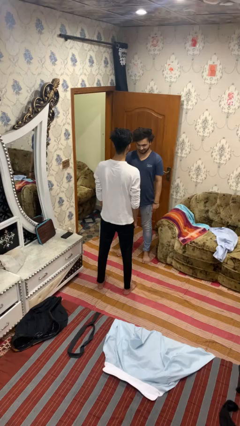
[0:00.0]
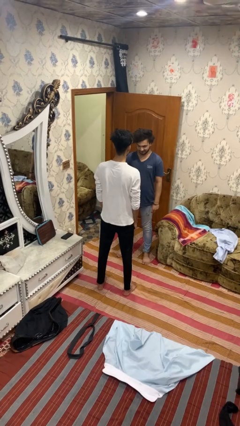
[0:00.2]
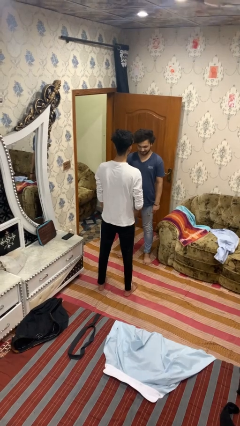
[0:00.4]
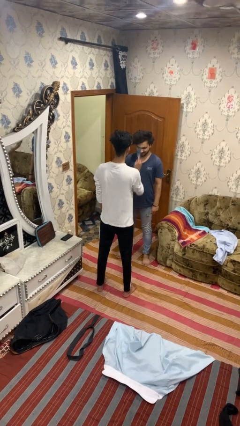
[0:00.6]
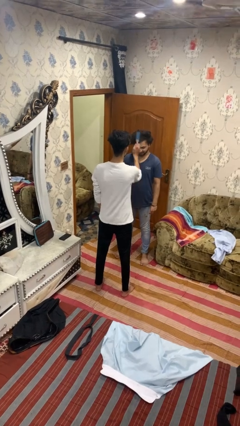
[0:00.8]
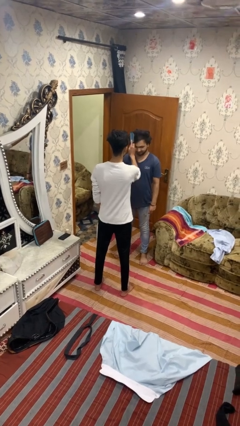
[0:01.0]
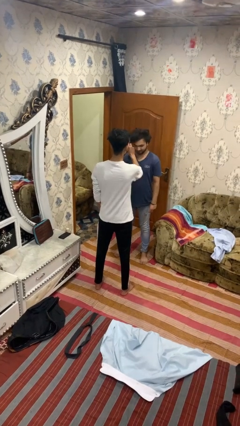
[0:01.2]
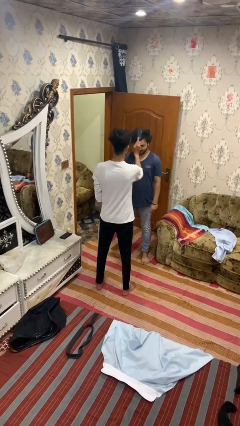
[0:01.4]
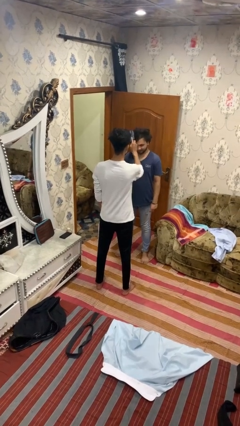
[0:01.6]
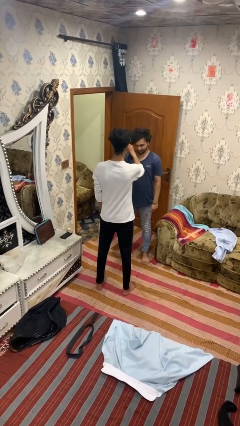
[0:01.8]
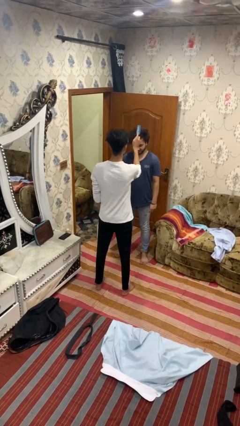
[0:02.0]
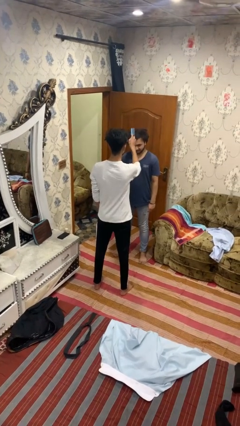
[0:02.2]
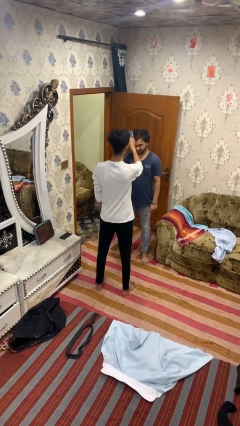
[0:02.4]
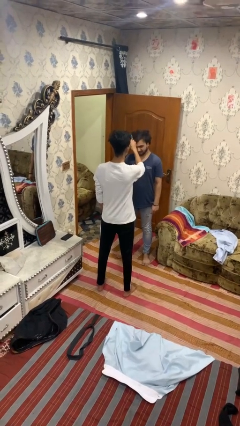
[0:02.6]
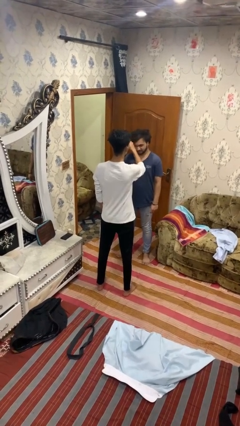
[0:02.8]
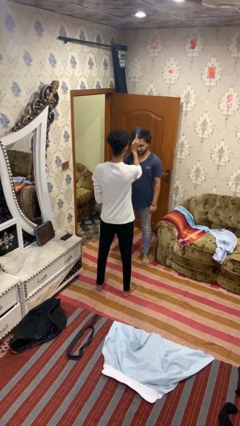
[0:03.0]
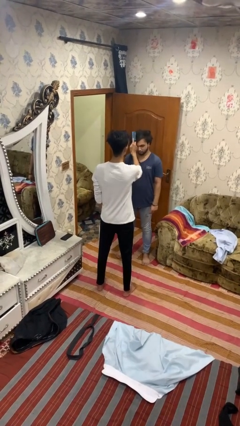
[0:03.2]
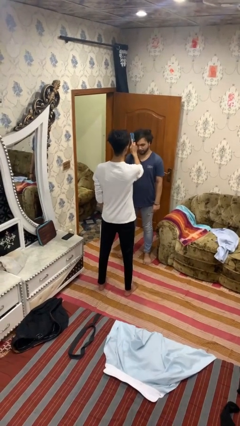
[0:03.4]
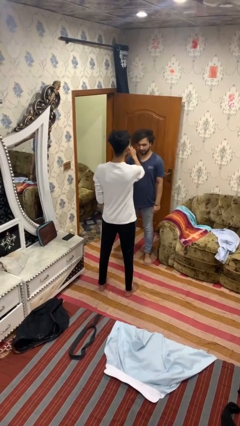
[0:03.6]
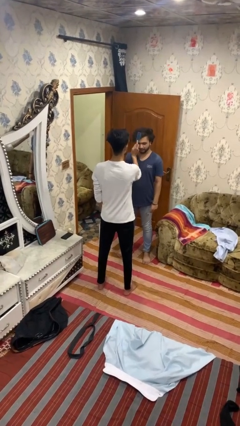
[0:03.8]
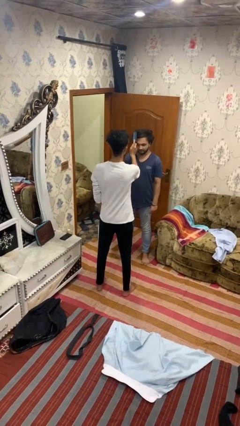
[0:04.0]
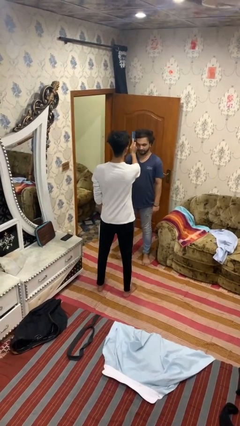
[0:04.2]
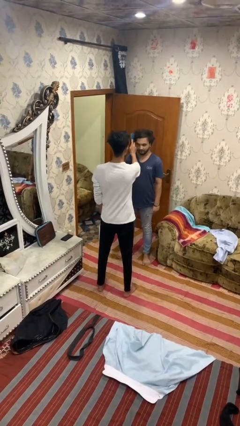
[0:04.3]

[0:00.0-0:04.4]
person brushes hair of person

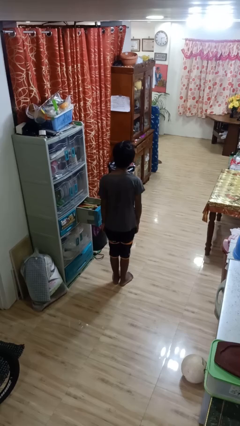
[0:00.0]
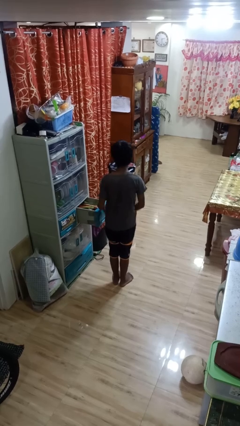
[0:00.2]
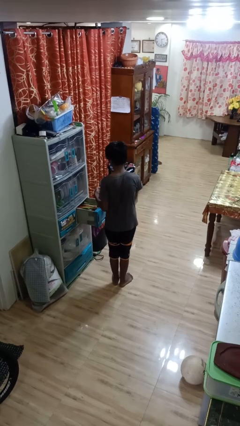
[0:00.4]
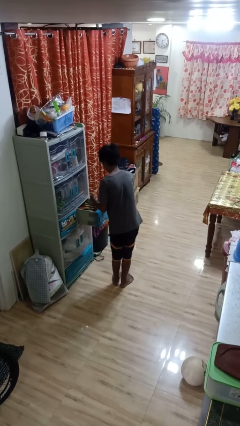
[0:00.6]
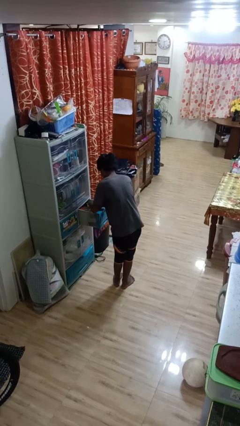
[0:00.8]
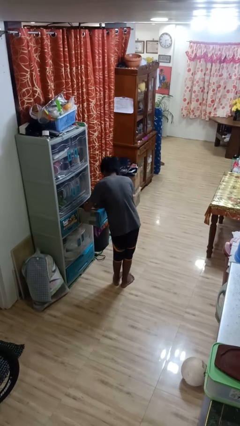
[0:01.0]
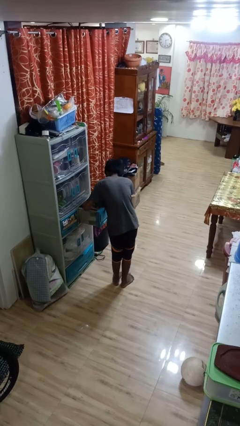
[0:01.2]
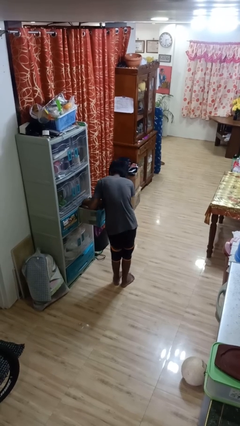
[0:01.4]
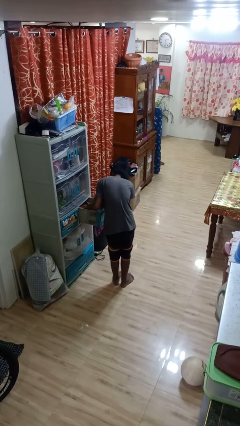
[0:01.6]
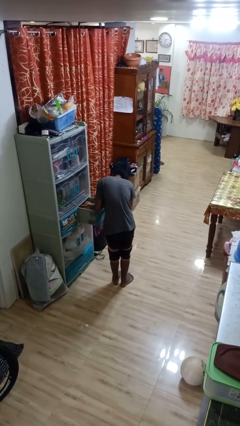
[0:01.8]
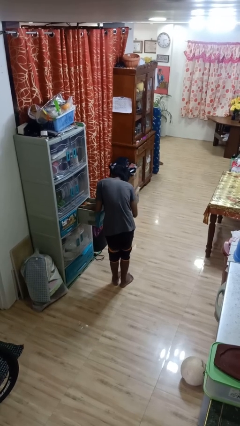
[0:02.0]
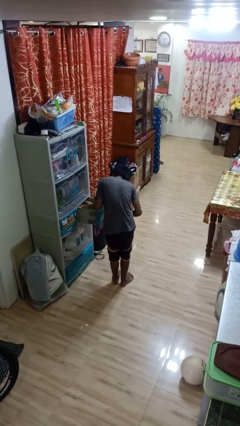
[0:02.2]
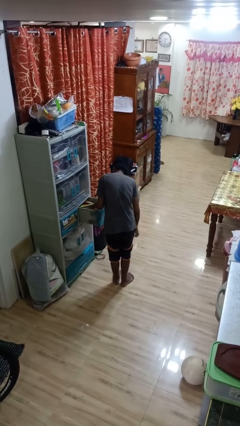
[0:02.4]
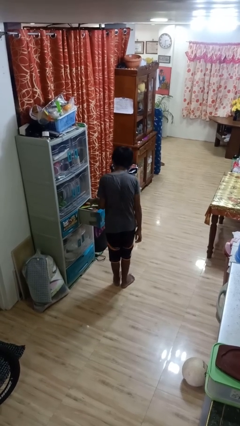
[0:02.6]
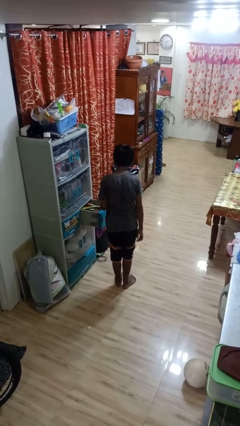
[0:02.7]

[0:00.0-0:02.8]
person searches in kitchen drawer

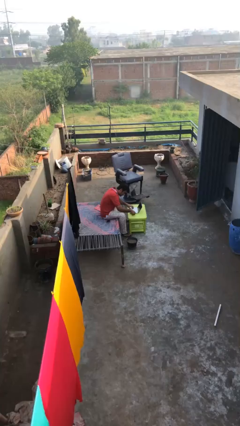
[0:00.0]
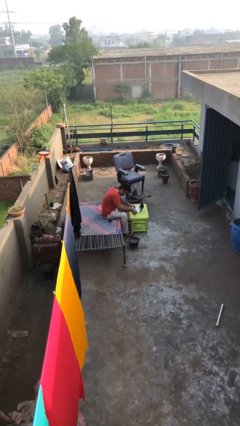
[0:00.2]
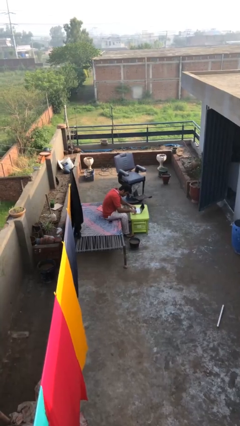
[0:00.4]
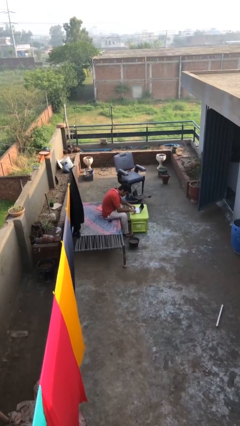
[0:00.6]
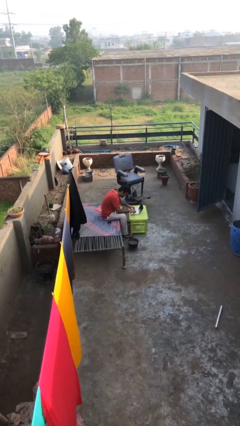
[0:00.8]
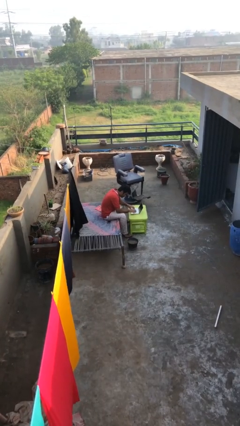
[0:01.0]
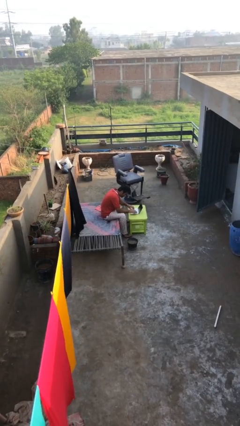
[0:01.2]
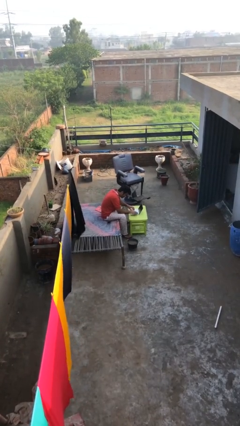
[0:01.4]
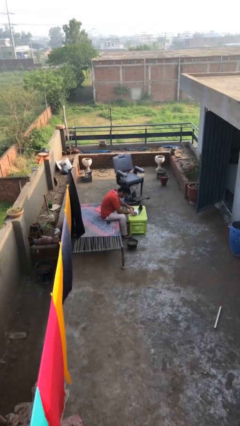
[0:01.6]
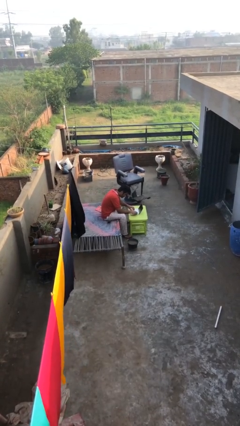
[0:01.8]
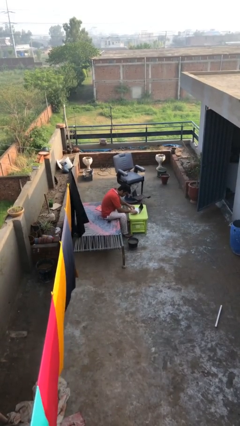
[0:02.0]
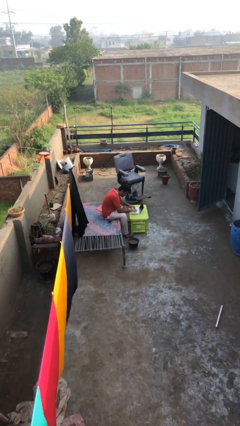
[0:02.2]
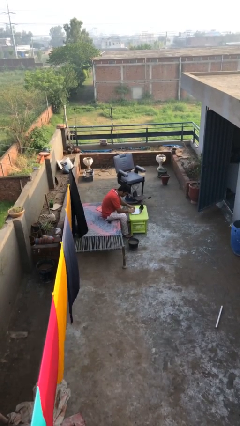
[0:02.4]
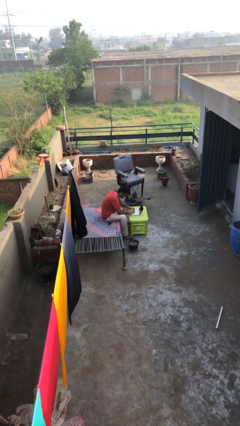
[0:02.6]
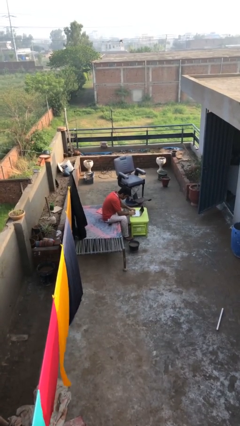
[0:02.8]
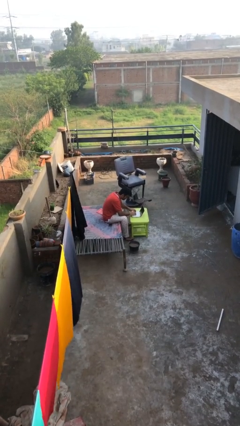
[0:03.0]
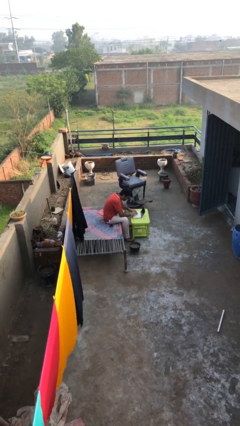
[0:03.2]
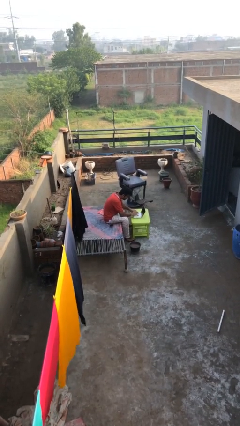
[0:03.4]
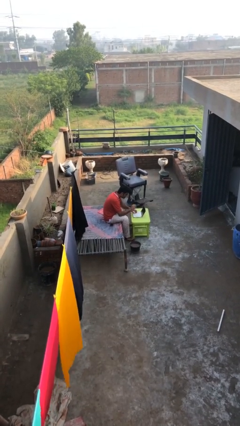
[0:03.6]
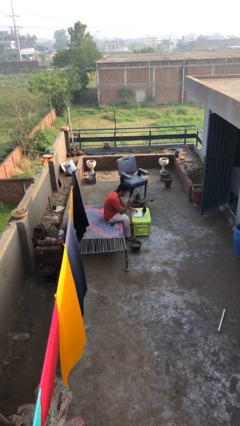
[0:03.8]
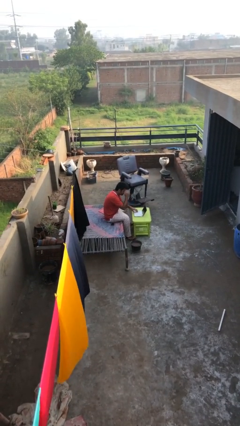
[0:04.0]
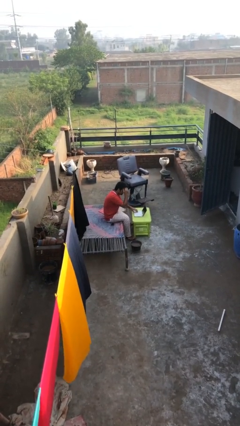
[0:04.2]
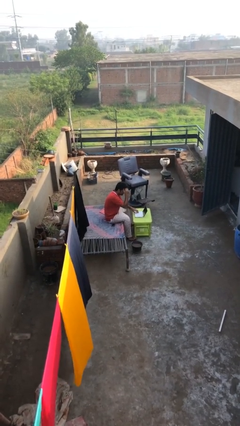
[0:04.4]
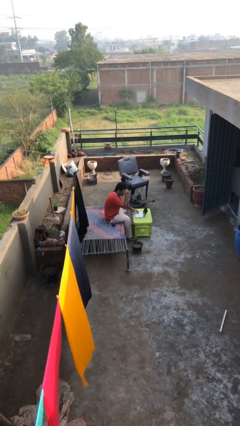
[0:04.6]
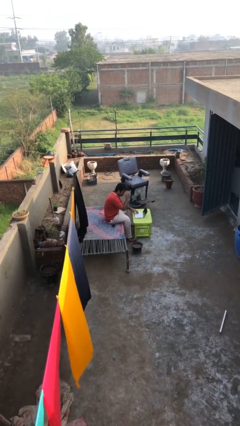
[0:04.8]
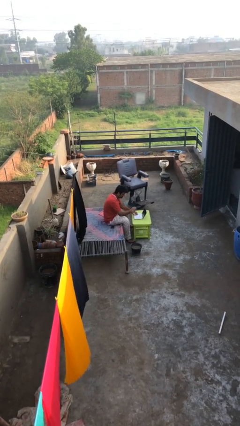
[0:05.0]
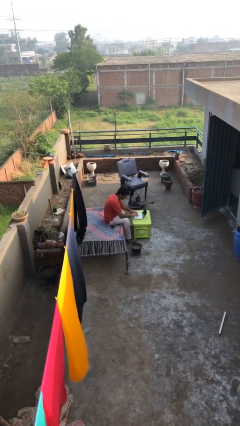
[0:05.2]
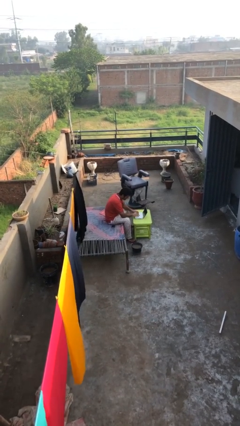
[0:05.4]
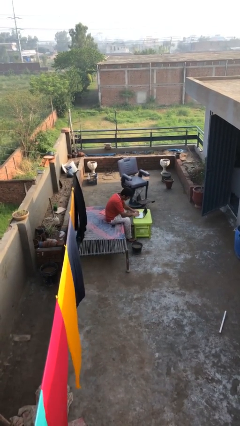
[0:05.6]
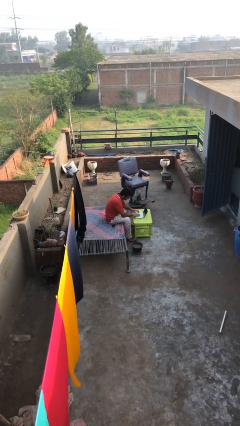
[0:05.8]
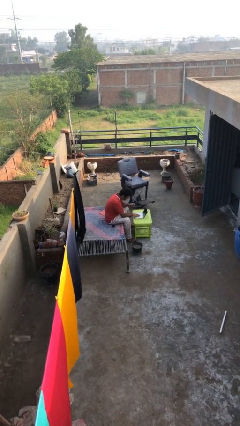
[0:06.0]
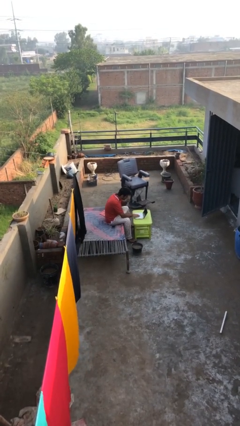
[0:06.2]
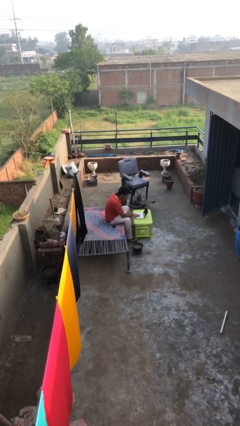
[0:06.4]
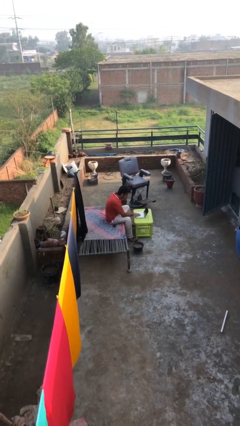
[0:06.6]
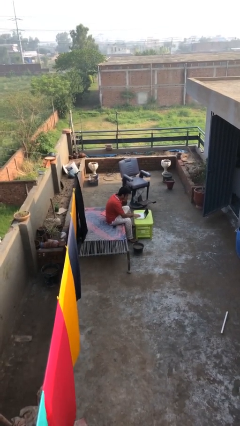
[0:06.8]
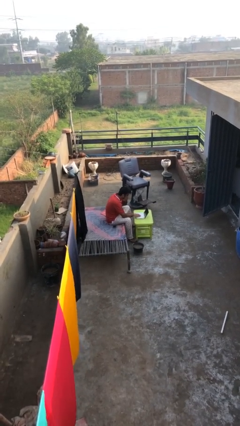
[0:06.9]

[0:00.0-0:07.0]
person interacts with laptop

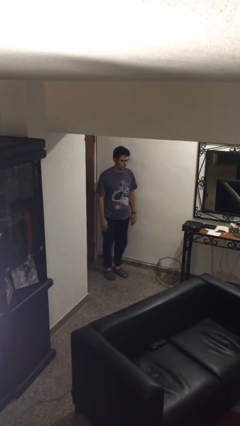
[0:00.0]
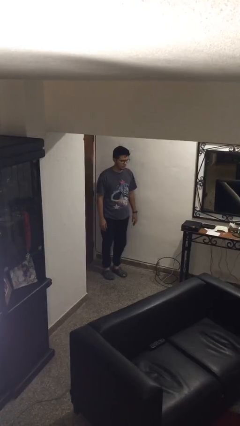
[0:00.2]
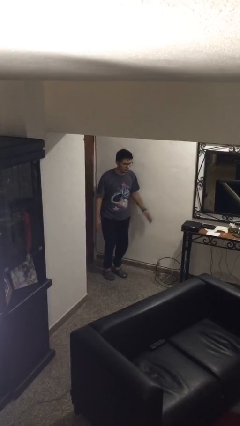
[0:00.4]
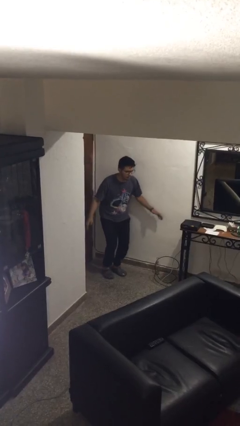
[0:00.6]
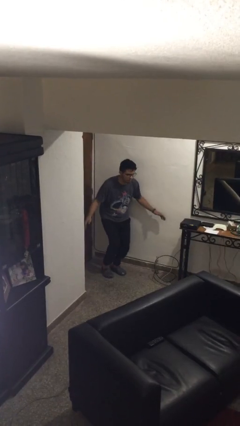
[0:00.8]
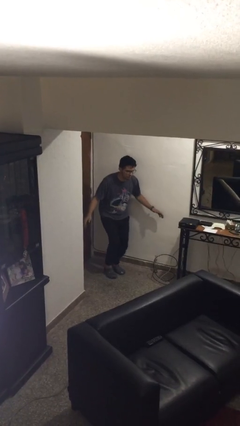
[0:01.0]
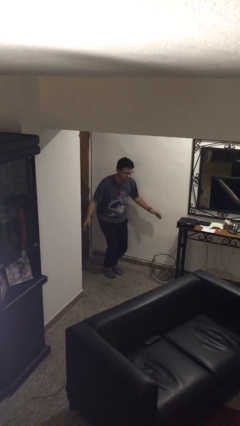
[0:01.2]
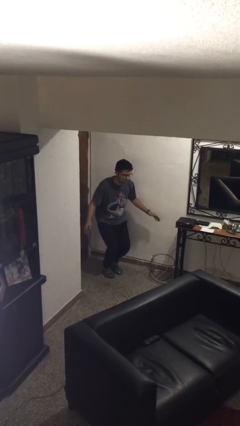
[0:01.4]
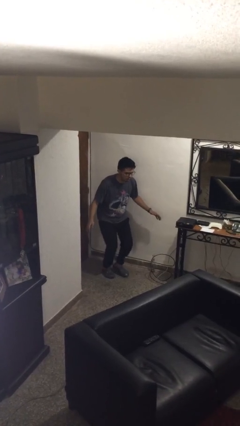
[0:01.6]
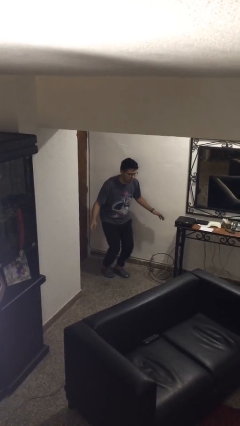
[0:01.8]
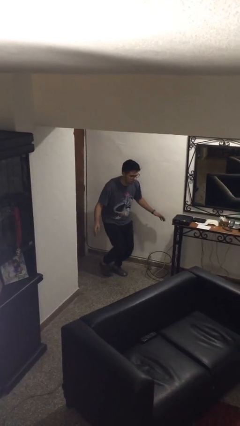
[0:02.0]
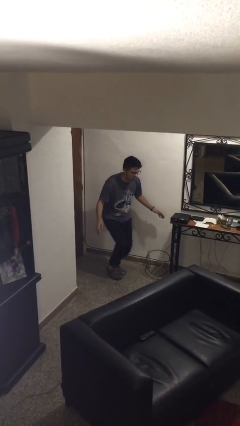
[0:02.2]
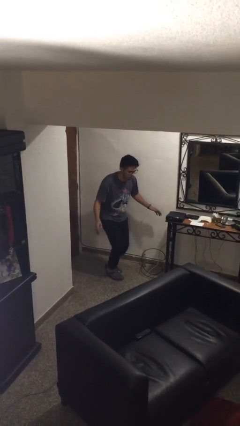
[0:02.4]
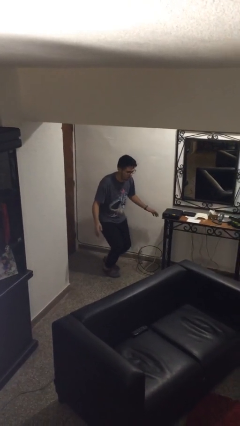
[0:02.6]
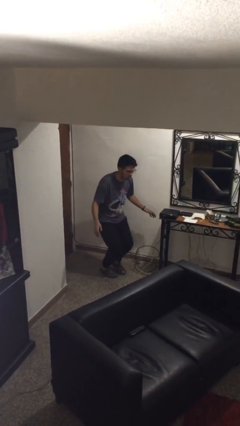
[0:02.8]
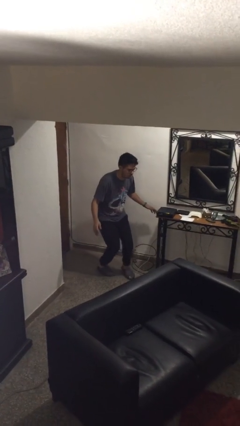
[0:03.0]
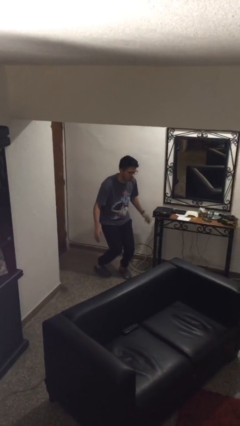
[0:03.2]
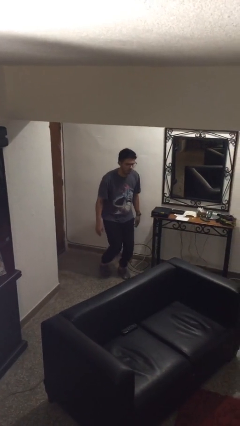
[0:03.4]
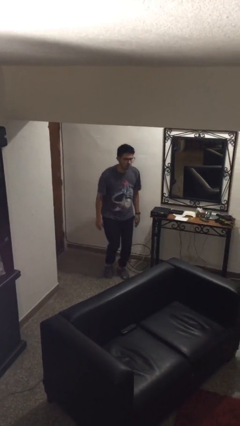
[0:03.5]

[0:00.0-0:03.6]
person walks tiptoe
